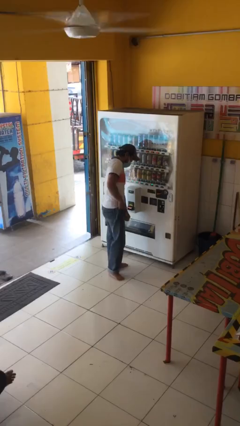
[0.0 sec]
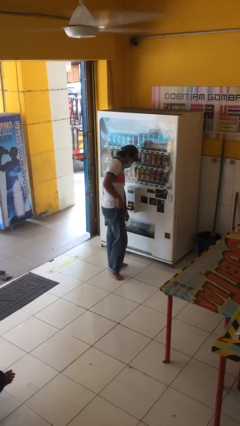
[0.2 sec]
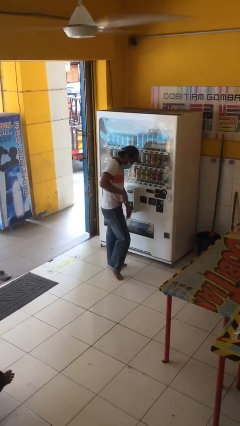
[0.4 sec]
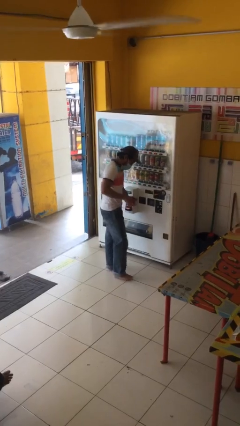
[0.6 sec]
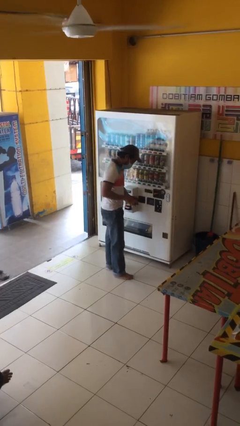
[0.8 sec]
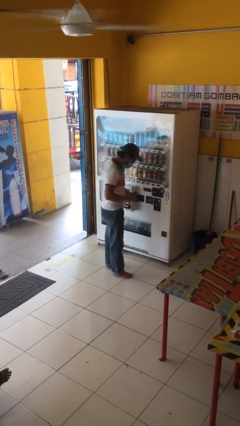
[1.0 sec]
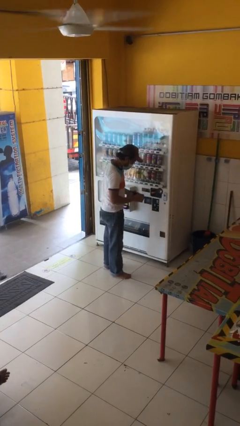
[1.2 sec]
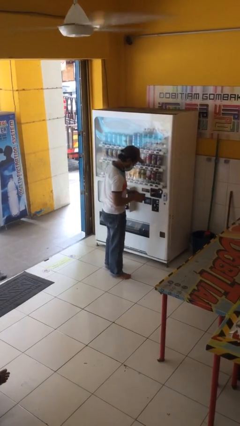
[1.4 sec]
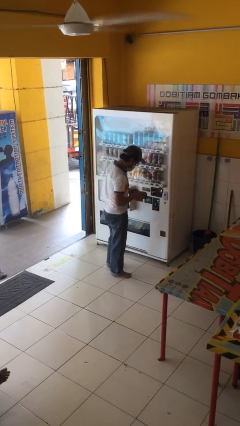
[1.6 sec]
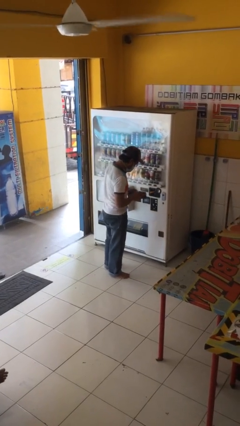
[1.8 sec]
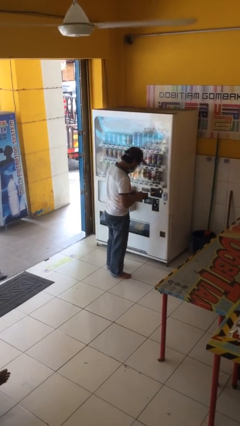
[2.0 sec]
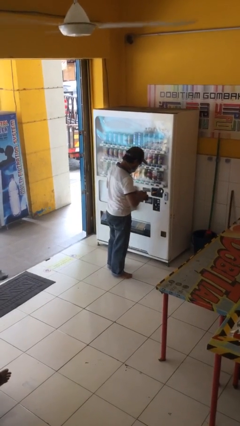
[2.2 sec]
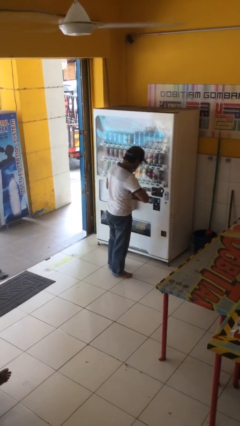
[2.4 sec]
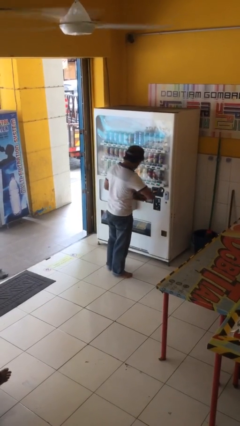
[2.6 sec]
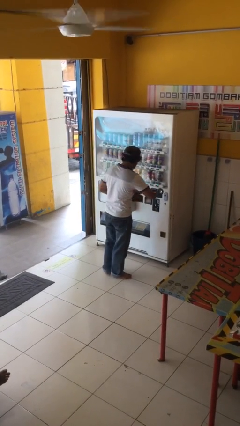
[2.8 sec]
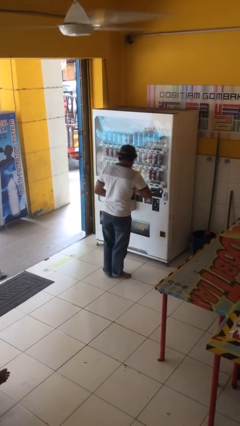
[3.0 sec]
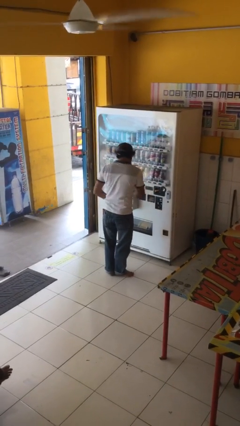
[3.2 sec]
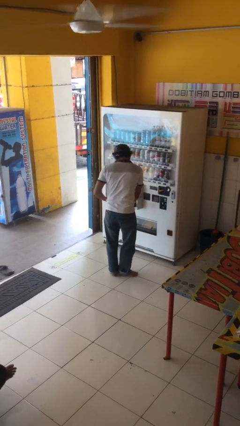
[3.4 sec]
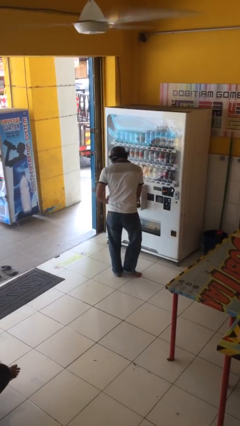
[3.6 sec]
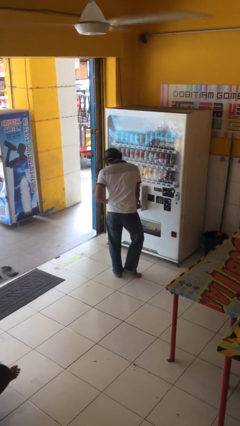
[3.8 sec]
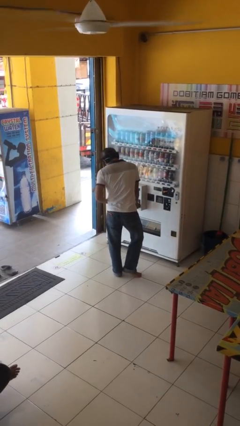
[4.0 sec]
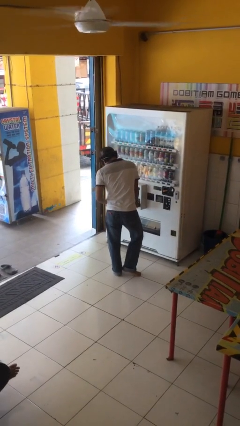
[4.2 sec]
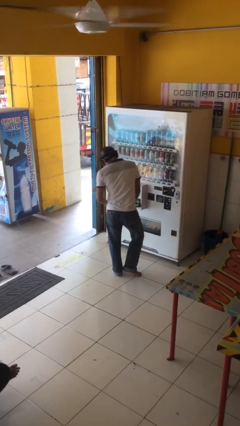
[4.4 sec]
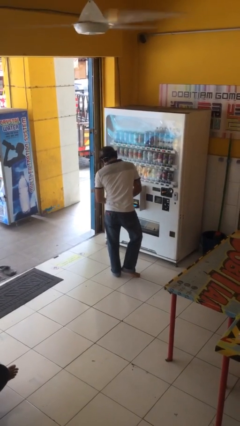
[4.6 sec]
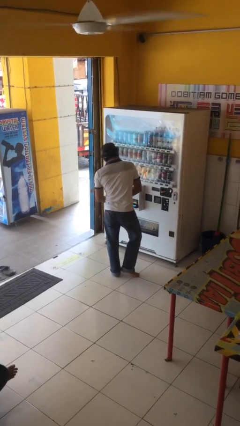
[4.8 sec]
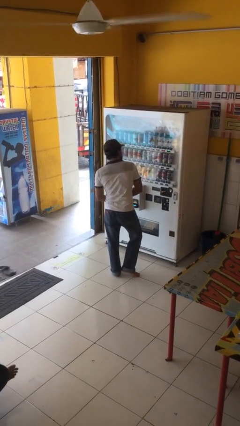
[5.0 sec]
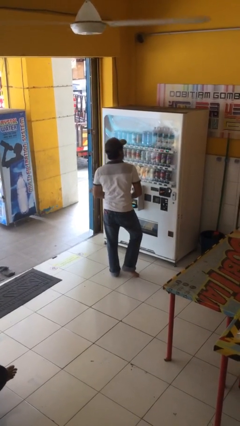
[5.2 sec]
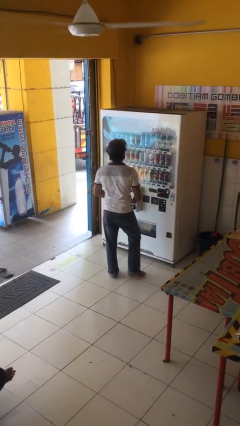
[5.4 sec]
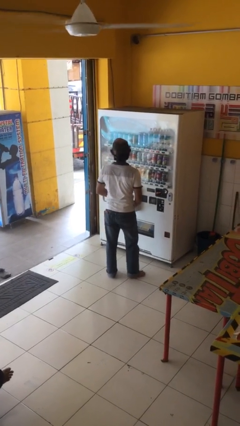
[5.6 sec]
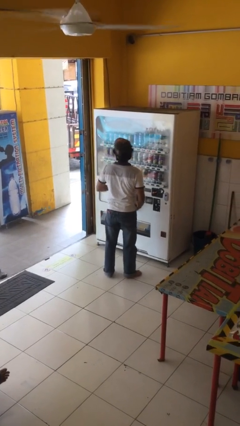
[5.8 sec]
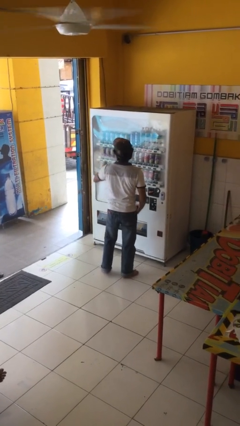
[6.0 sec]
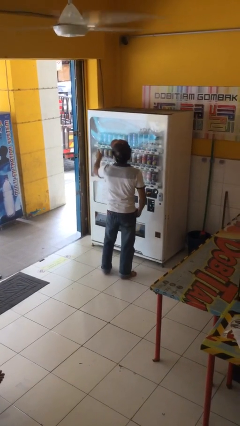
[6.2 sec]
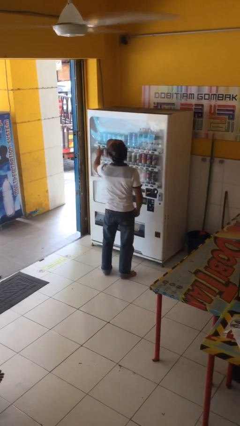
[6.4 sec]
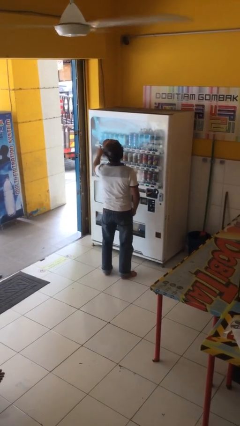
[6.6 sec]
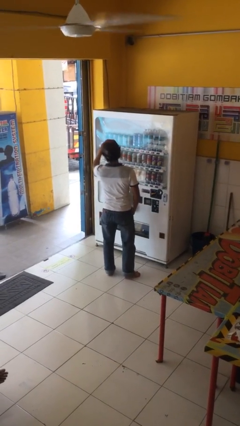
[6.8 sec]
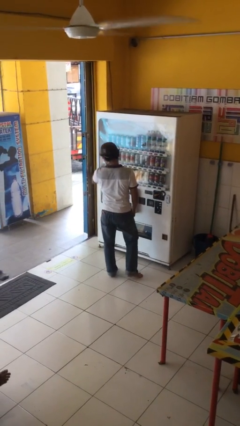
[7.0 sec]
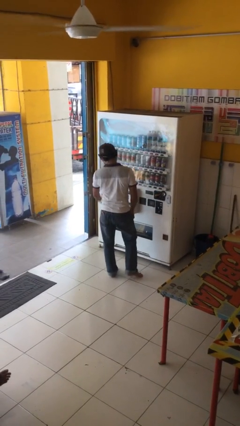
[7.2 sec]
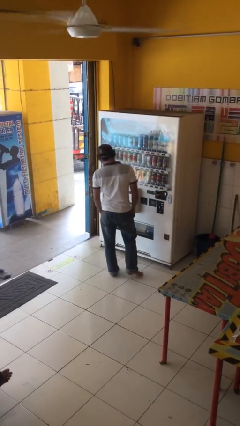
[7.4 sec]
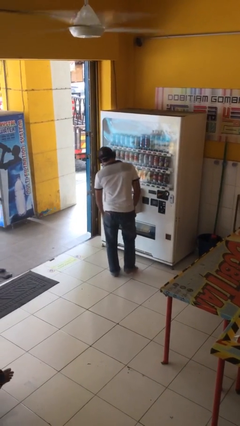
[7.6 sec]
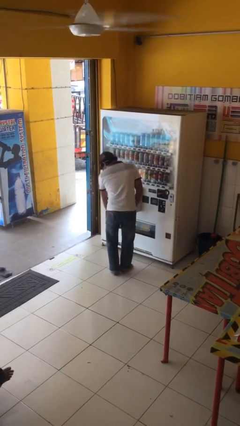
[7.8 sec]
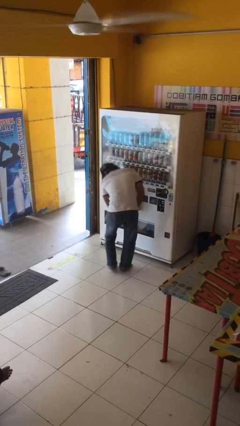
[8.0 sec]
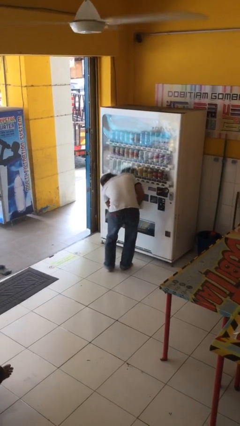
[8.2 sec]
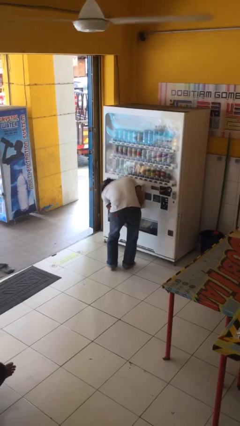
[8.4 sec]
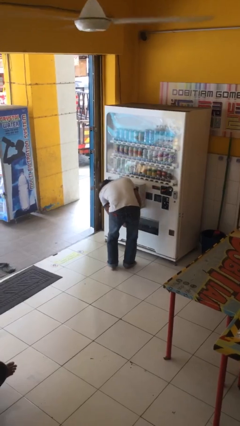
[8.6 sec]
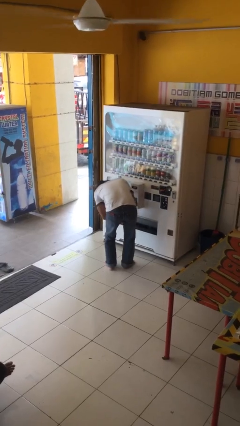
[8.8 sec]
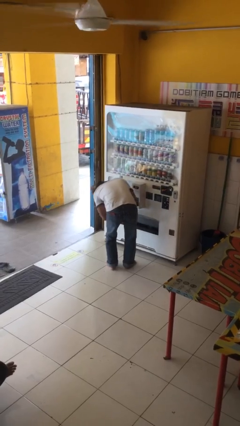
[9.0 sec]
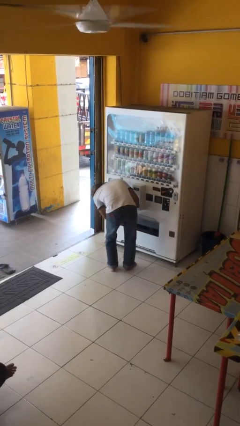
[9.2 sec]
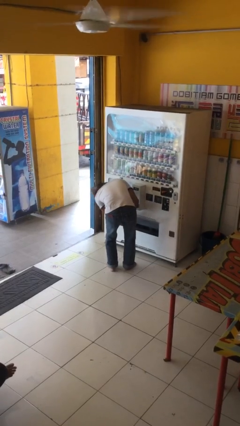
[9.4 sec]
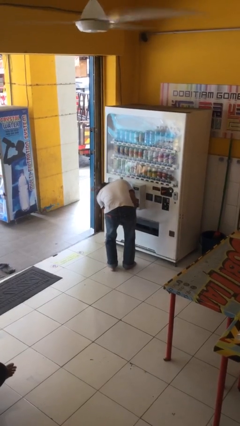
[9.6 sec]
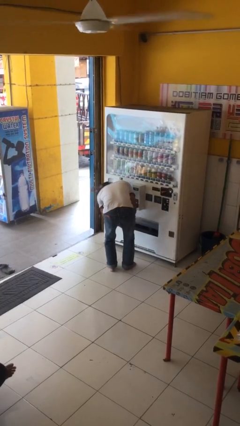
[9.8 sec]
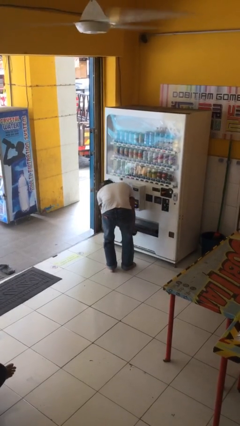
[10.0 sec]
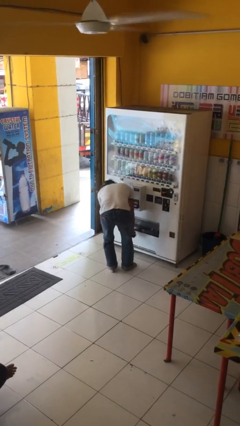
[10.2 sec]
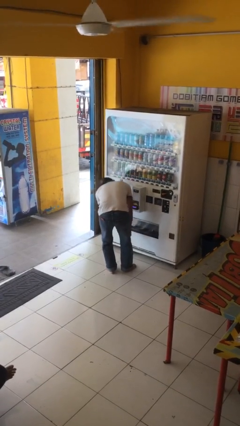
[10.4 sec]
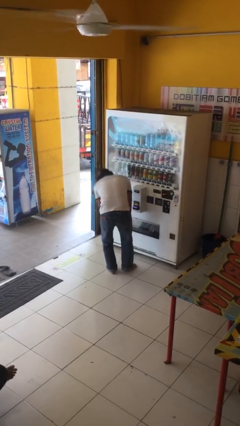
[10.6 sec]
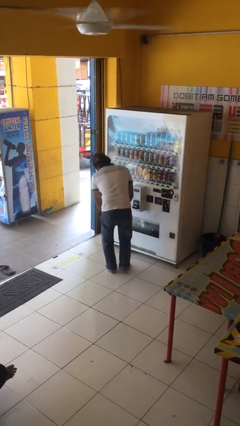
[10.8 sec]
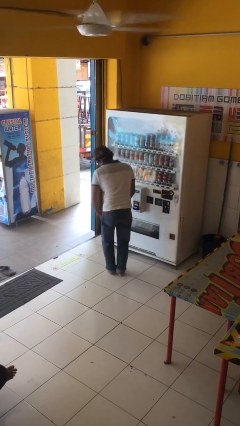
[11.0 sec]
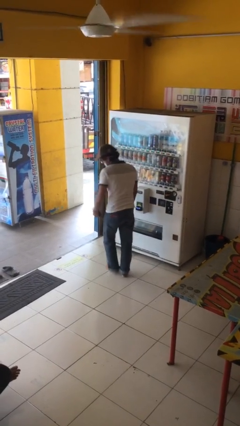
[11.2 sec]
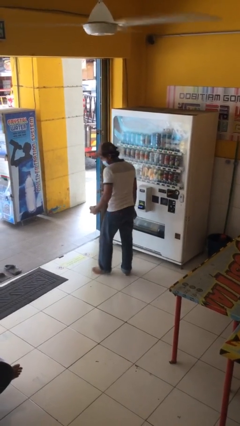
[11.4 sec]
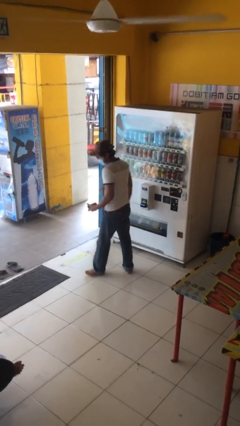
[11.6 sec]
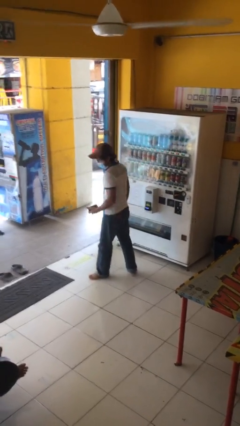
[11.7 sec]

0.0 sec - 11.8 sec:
person purchases from machine

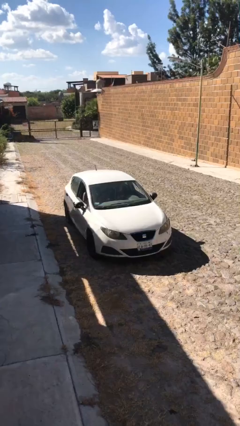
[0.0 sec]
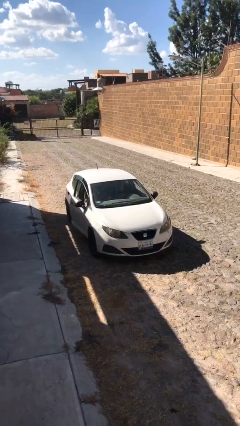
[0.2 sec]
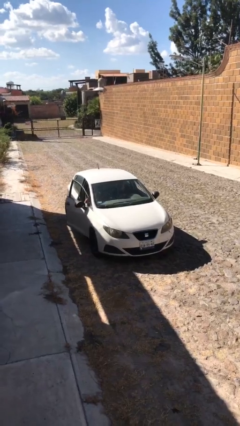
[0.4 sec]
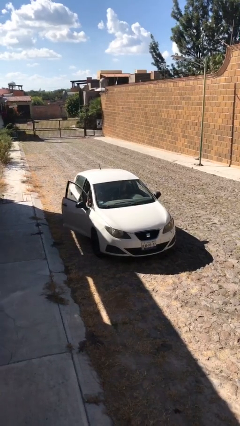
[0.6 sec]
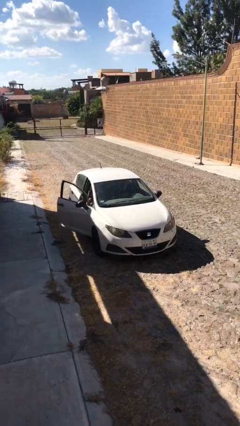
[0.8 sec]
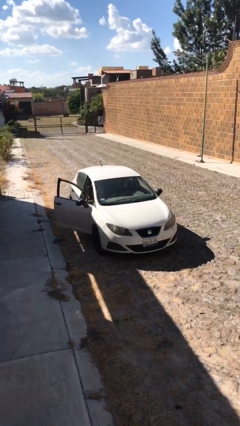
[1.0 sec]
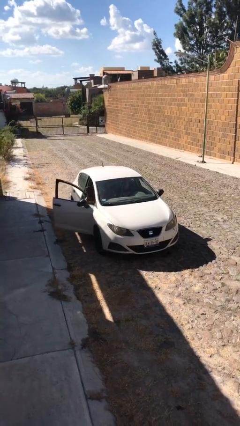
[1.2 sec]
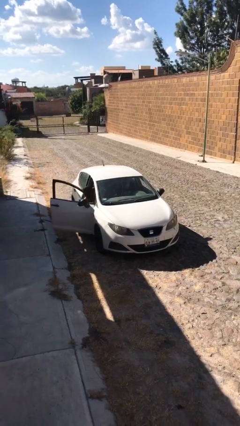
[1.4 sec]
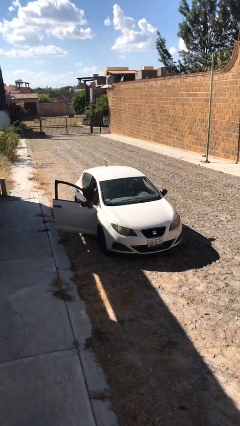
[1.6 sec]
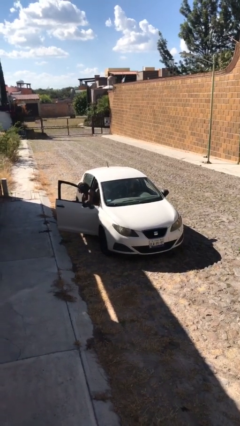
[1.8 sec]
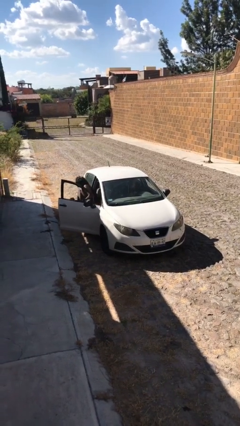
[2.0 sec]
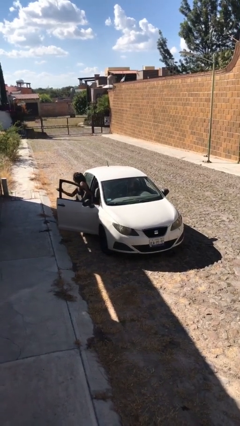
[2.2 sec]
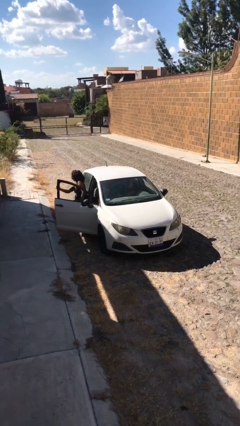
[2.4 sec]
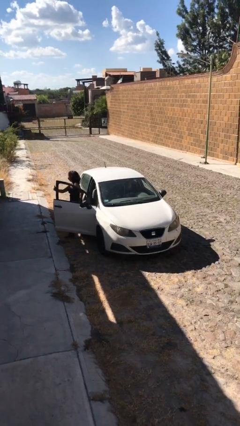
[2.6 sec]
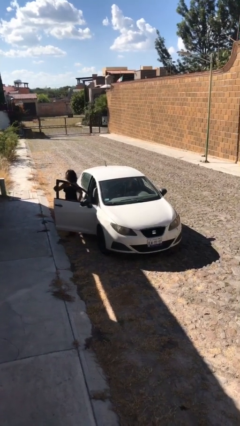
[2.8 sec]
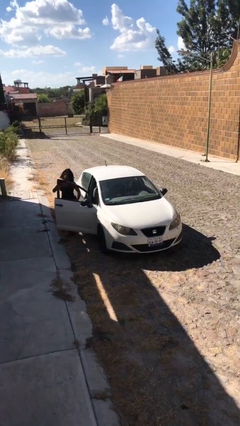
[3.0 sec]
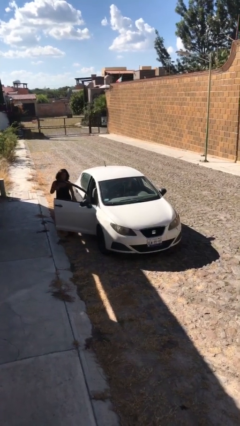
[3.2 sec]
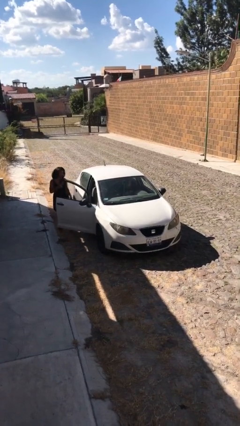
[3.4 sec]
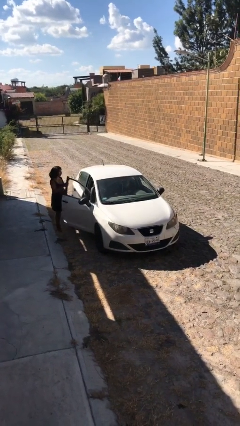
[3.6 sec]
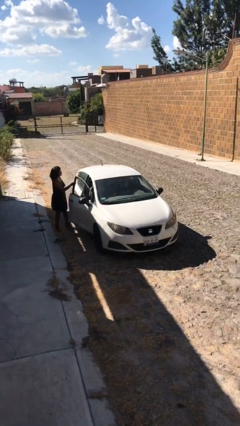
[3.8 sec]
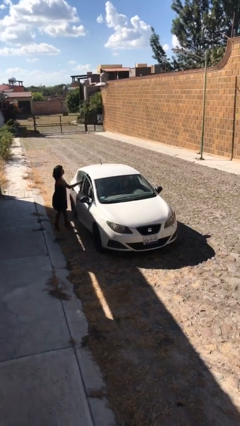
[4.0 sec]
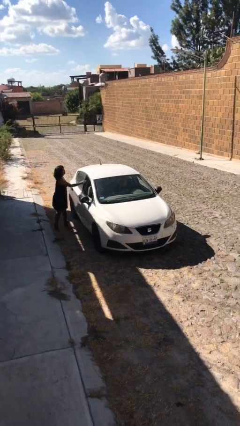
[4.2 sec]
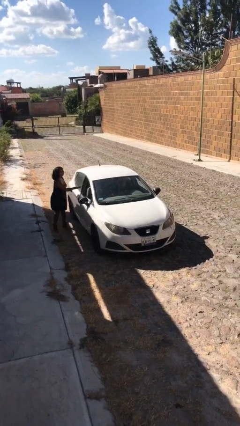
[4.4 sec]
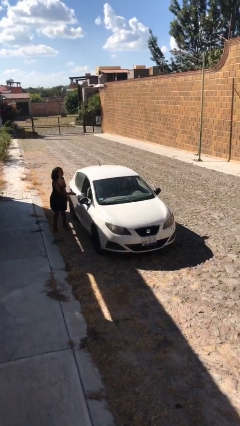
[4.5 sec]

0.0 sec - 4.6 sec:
car drops off person

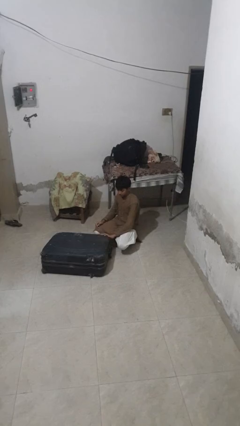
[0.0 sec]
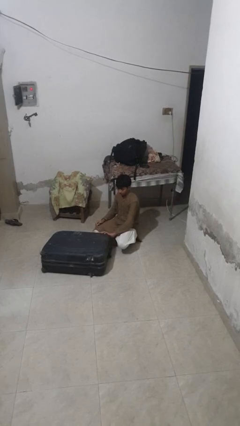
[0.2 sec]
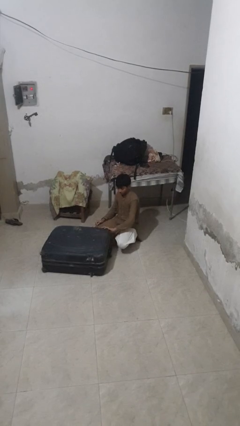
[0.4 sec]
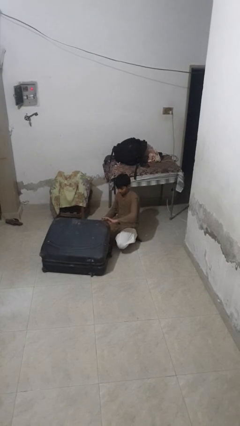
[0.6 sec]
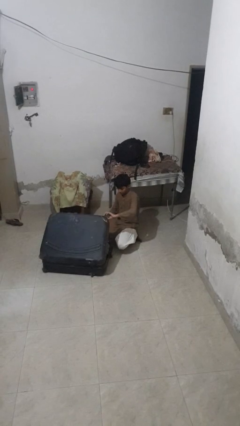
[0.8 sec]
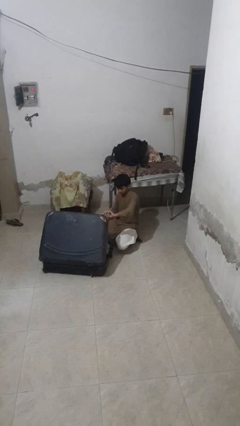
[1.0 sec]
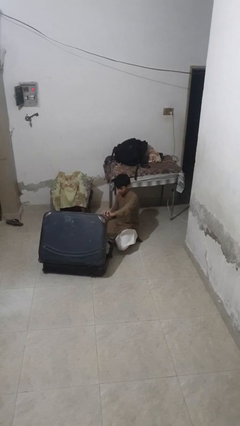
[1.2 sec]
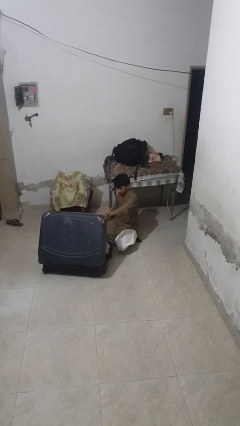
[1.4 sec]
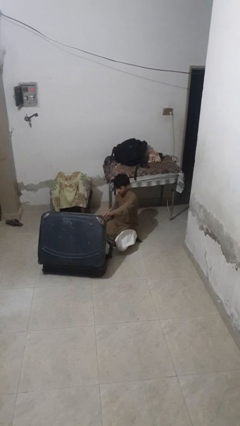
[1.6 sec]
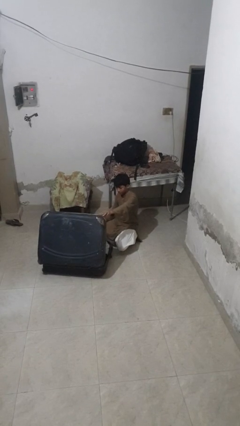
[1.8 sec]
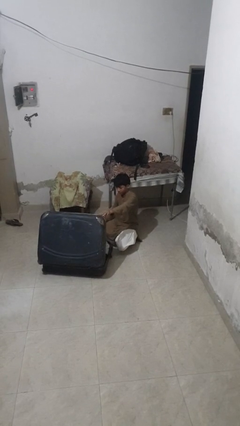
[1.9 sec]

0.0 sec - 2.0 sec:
person opens suitcase
